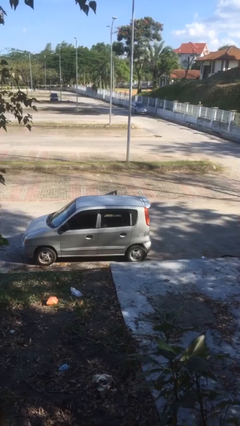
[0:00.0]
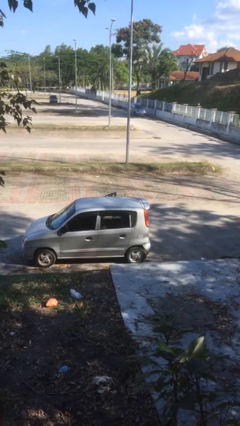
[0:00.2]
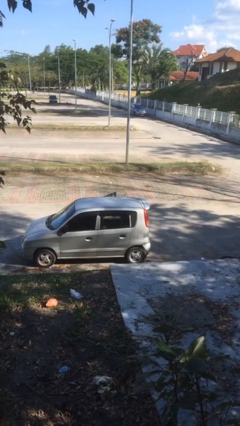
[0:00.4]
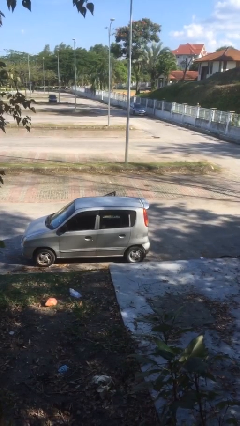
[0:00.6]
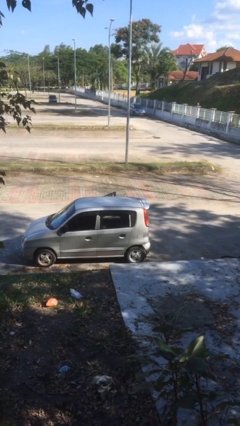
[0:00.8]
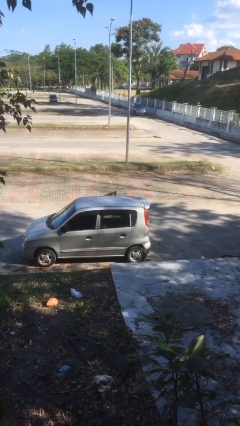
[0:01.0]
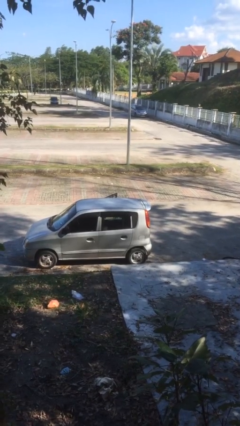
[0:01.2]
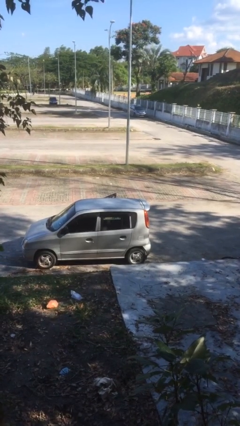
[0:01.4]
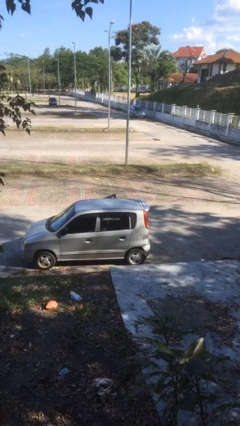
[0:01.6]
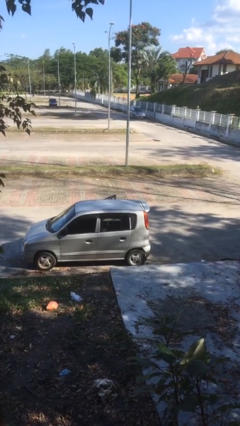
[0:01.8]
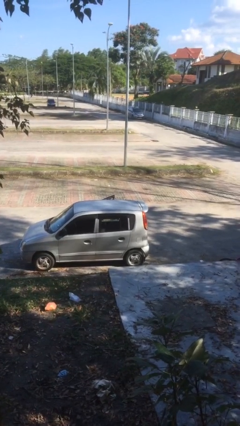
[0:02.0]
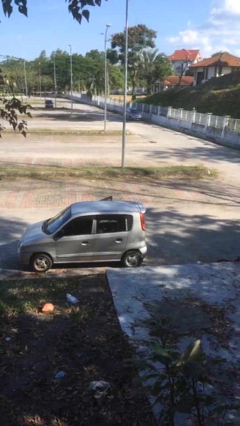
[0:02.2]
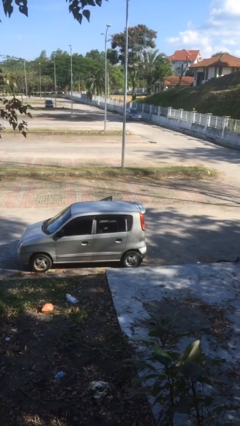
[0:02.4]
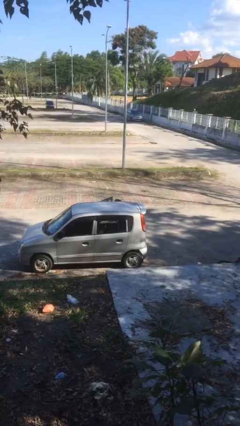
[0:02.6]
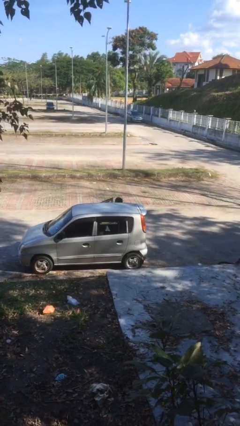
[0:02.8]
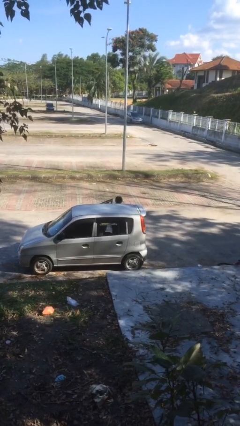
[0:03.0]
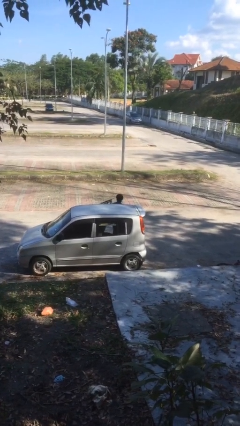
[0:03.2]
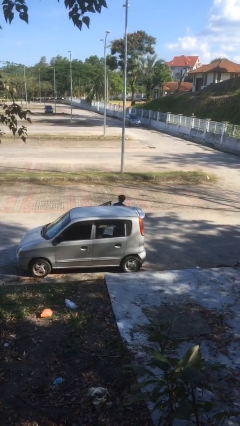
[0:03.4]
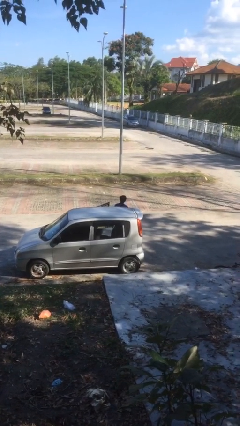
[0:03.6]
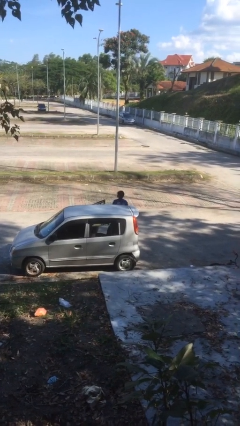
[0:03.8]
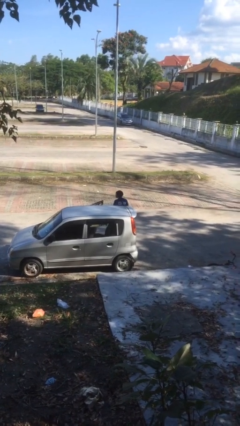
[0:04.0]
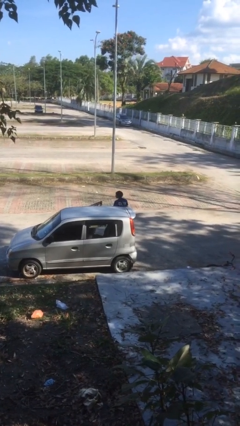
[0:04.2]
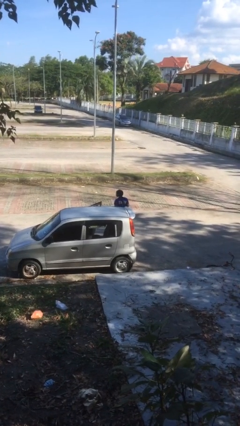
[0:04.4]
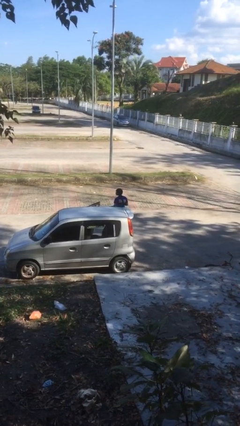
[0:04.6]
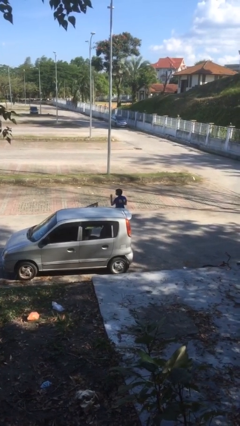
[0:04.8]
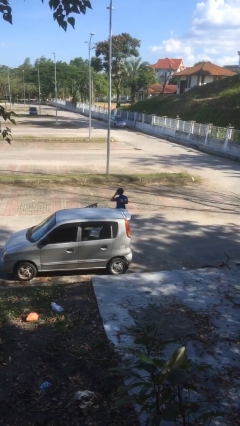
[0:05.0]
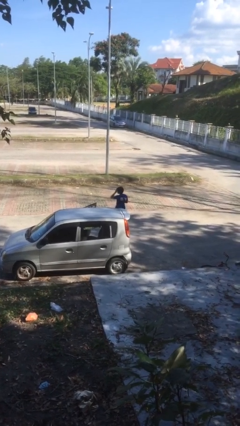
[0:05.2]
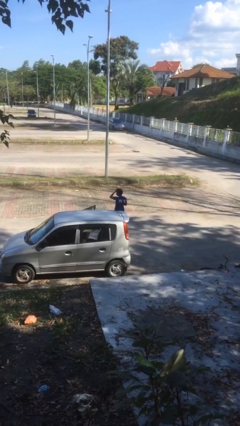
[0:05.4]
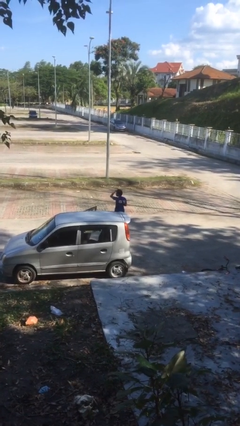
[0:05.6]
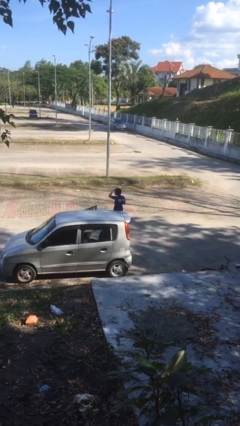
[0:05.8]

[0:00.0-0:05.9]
person exits car

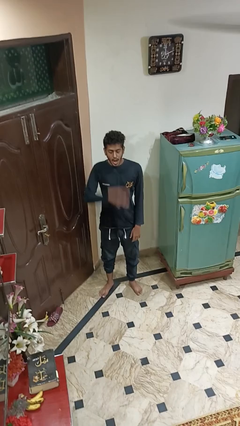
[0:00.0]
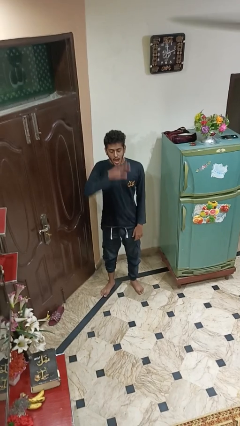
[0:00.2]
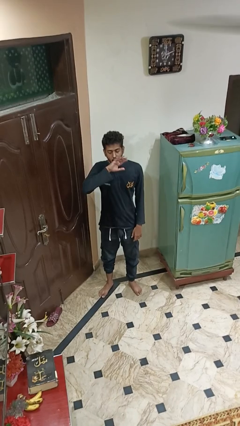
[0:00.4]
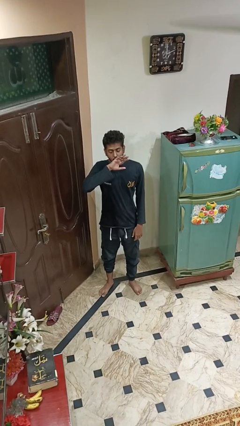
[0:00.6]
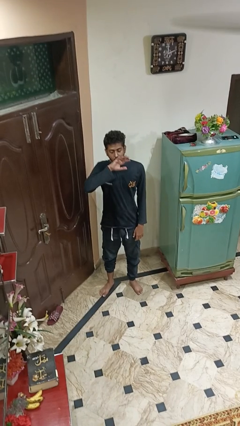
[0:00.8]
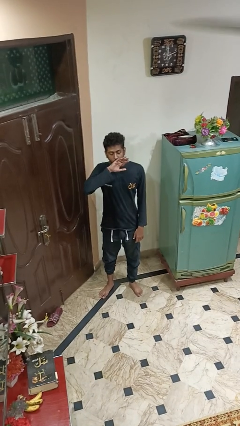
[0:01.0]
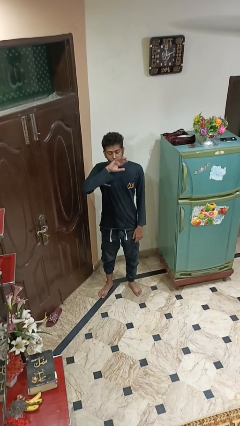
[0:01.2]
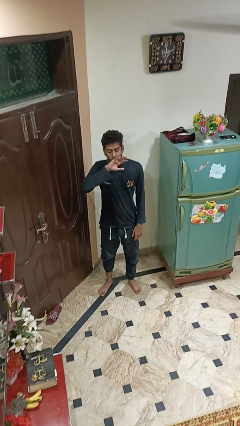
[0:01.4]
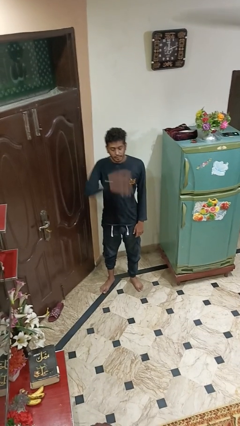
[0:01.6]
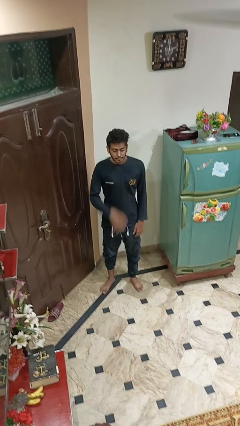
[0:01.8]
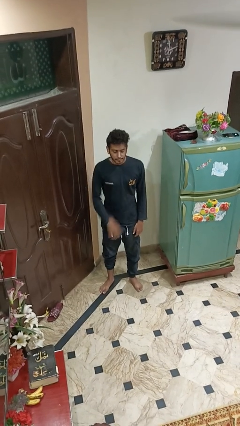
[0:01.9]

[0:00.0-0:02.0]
person yawns

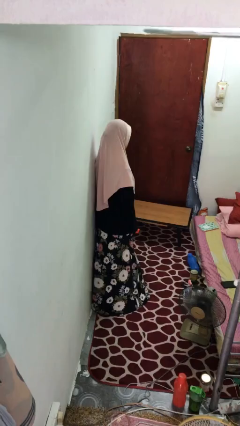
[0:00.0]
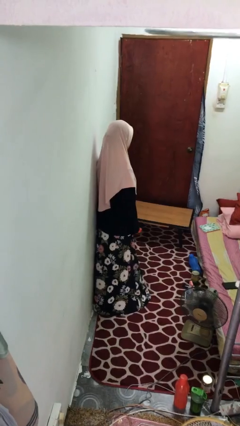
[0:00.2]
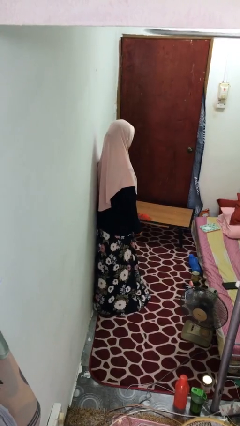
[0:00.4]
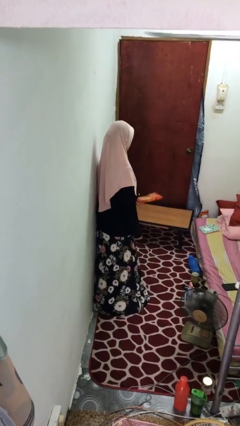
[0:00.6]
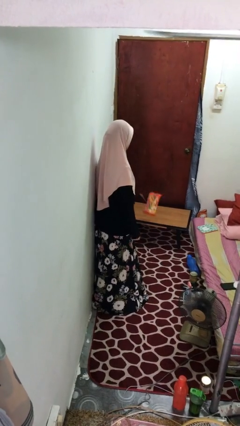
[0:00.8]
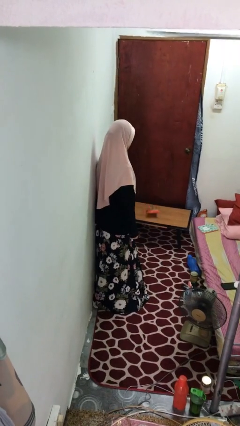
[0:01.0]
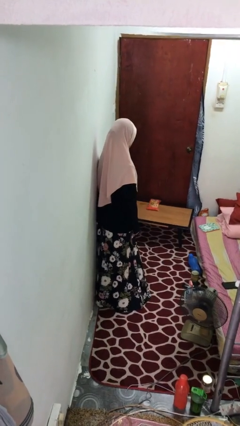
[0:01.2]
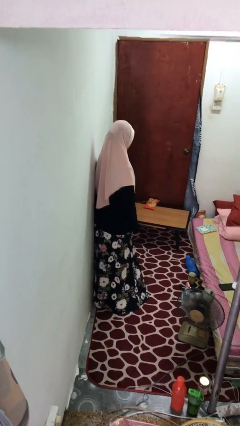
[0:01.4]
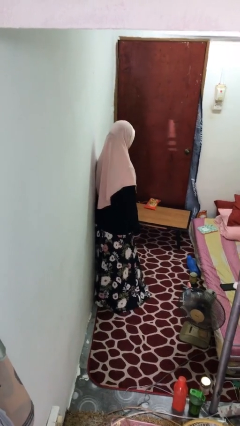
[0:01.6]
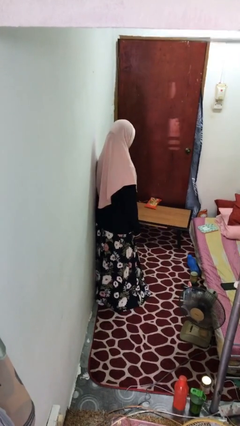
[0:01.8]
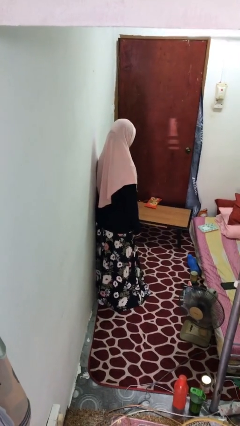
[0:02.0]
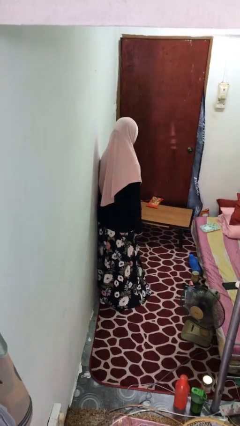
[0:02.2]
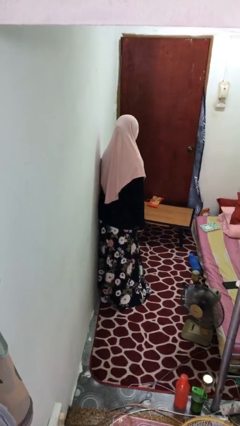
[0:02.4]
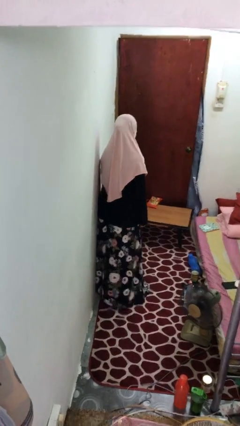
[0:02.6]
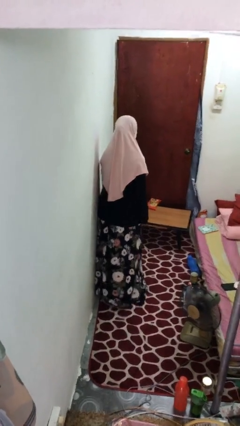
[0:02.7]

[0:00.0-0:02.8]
person throws object on table

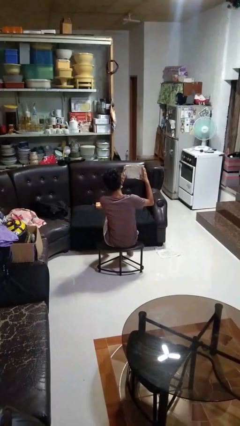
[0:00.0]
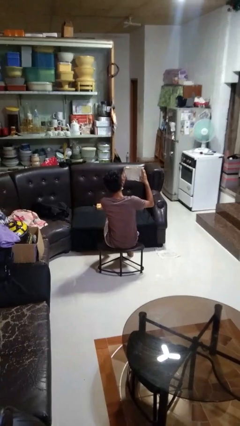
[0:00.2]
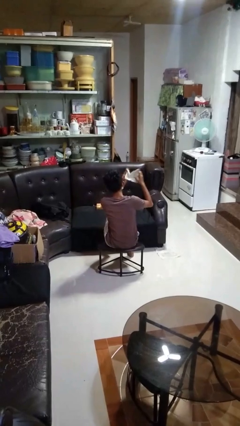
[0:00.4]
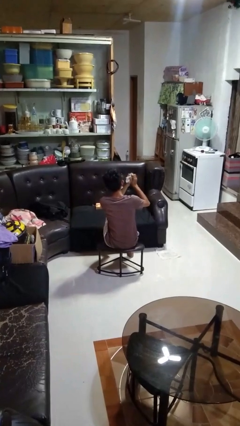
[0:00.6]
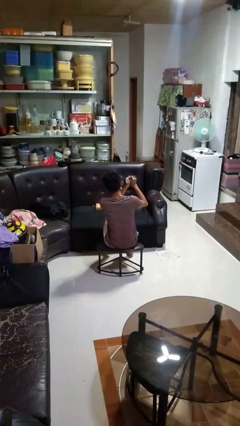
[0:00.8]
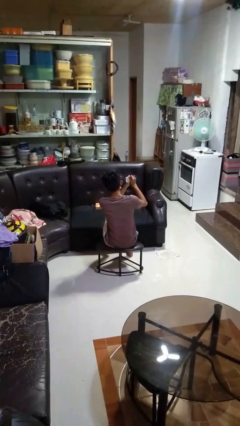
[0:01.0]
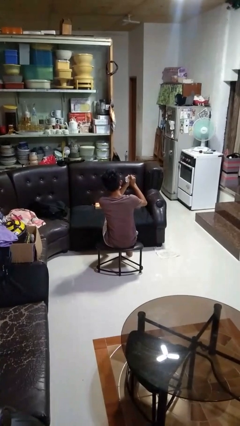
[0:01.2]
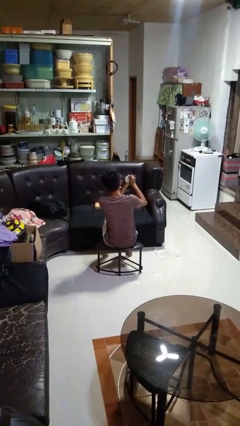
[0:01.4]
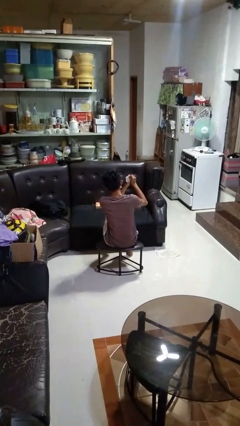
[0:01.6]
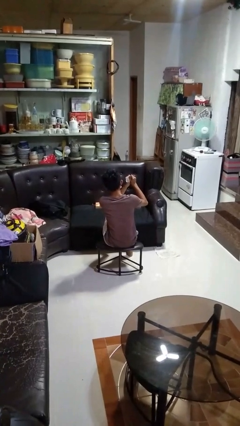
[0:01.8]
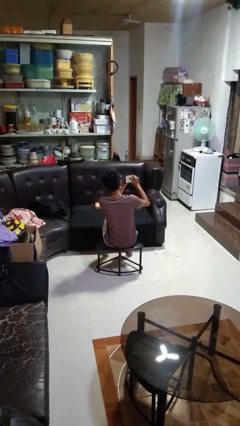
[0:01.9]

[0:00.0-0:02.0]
person crumples paper

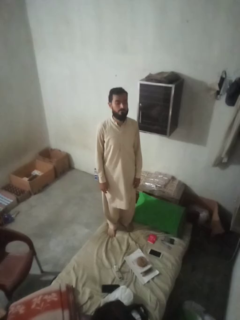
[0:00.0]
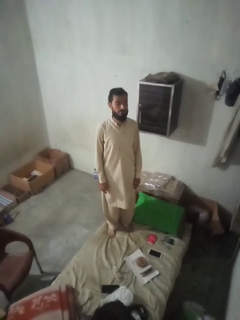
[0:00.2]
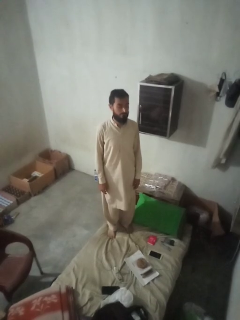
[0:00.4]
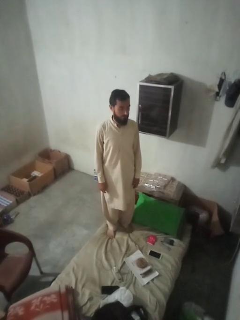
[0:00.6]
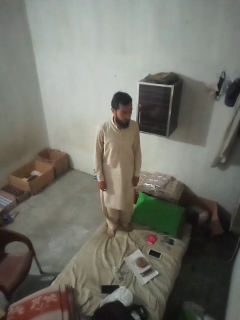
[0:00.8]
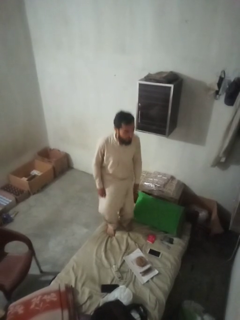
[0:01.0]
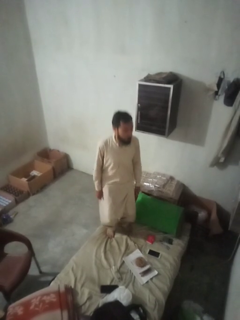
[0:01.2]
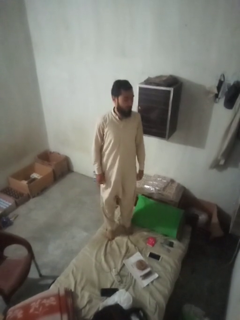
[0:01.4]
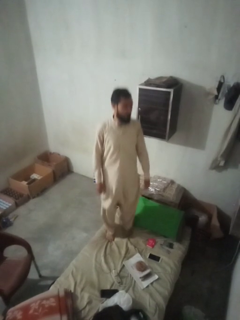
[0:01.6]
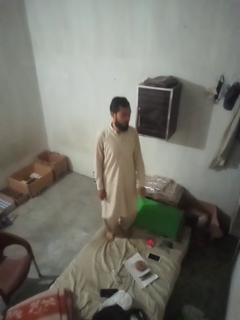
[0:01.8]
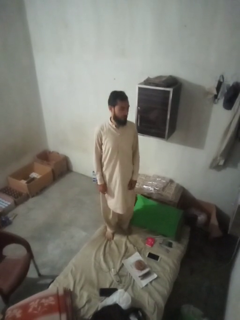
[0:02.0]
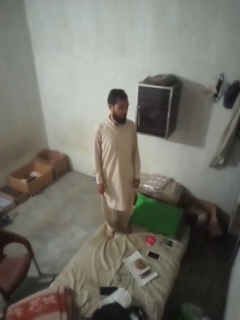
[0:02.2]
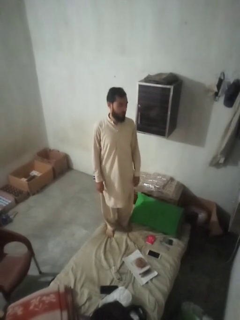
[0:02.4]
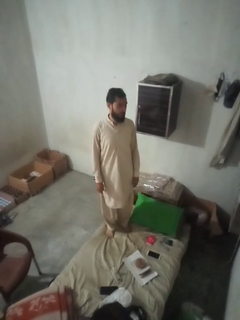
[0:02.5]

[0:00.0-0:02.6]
person jumps on bed

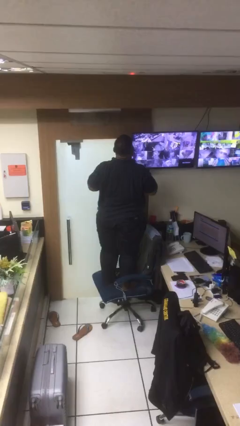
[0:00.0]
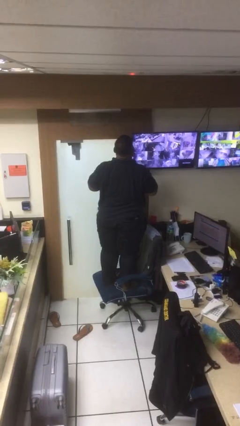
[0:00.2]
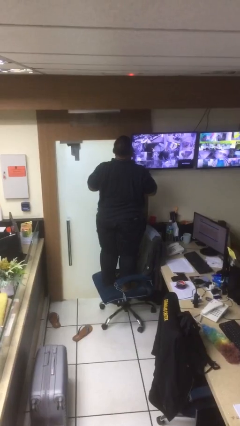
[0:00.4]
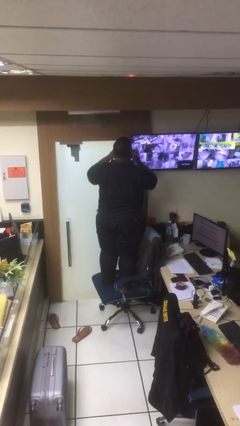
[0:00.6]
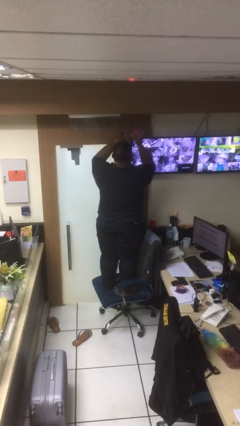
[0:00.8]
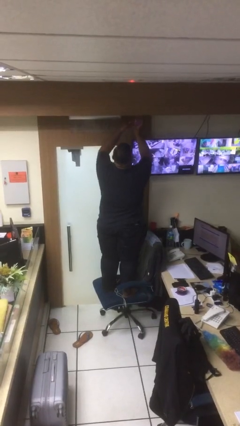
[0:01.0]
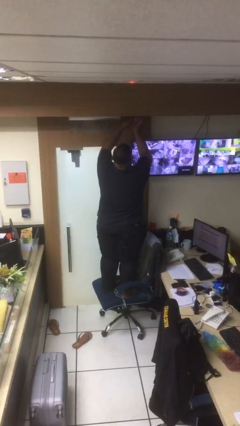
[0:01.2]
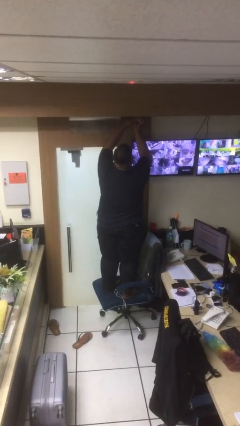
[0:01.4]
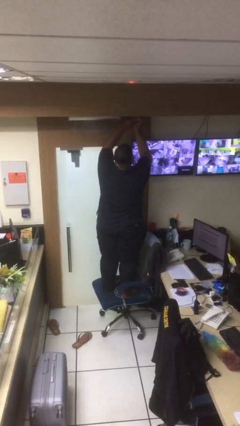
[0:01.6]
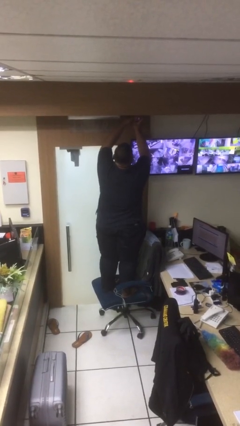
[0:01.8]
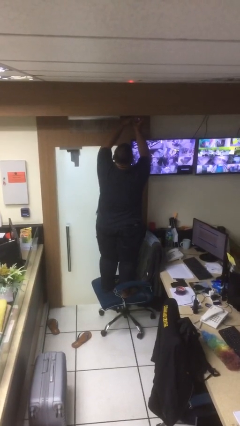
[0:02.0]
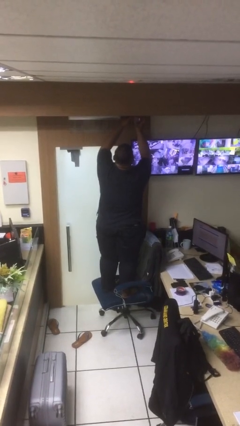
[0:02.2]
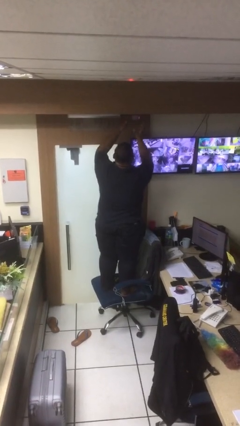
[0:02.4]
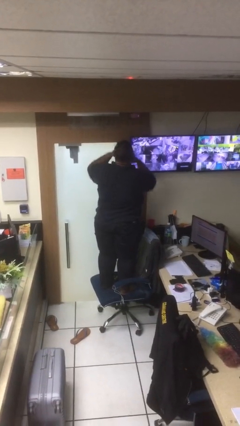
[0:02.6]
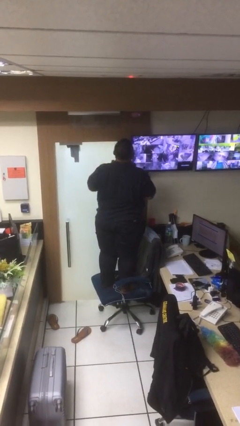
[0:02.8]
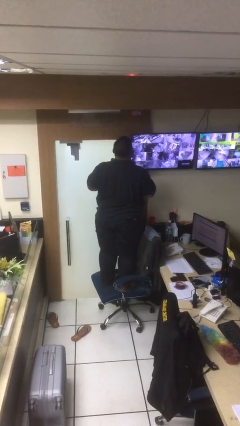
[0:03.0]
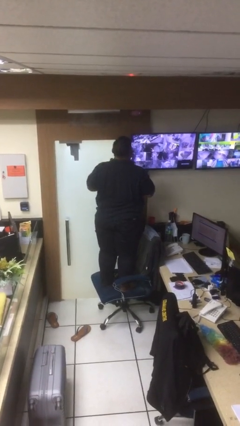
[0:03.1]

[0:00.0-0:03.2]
person puts up smoke detector
